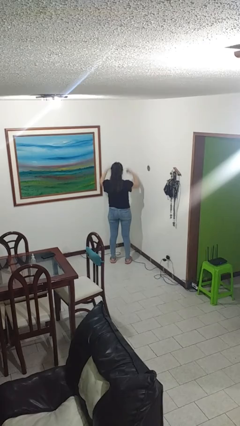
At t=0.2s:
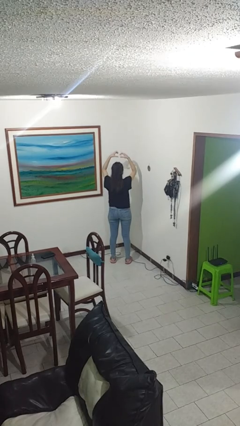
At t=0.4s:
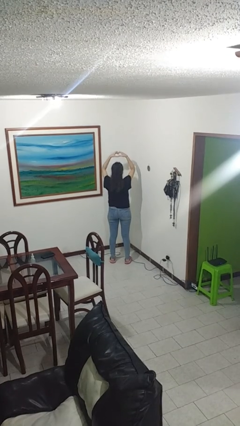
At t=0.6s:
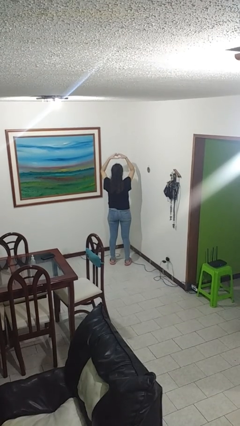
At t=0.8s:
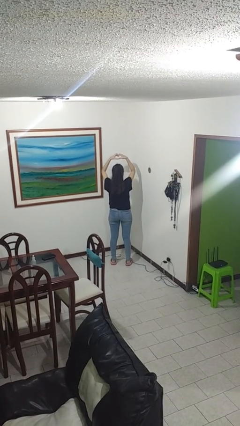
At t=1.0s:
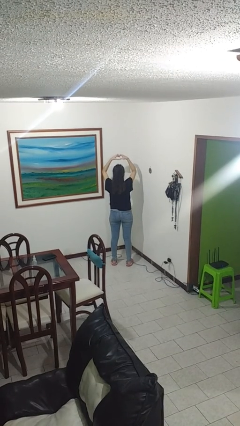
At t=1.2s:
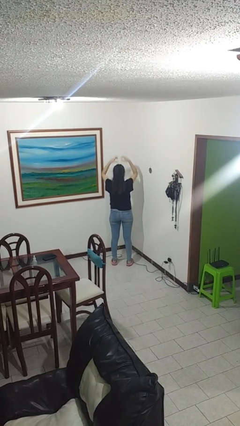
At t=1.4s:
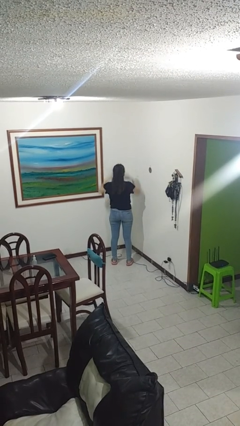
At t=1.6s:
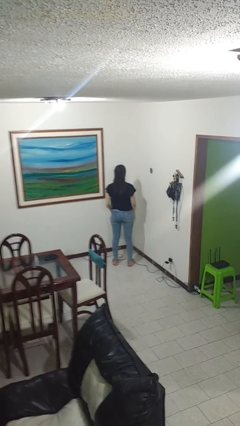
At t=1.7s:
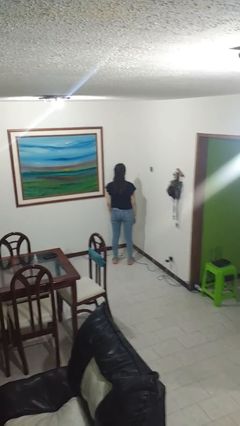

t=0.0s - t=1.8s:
person gestures heart

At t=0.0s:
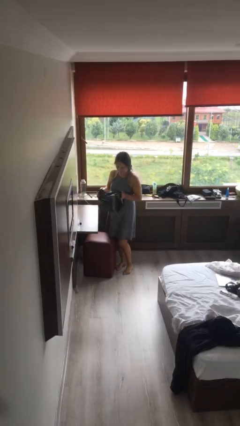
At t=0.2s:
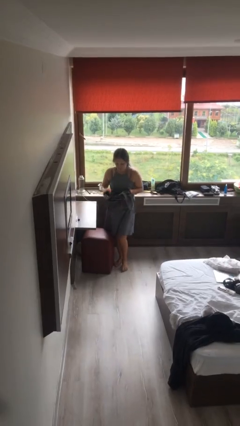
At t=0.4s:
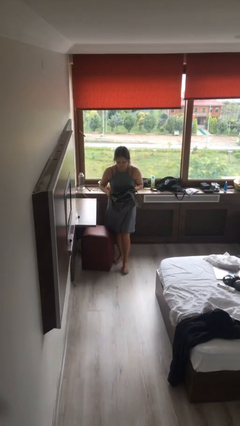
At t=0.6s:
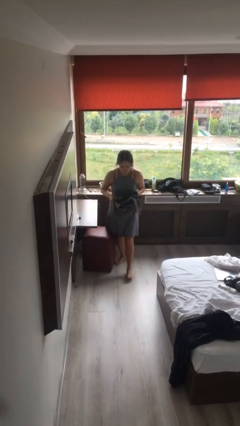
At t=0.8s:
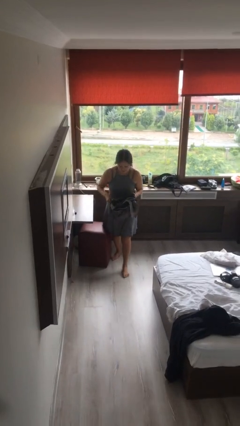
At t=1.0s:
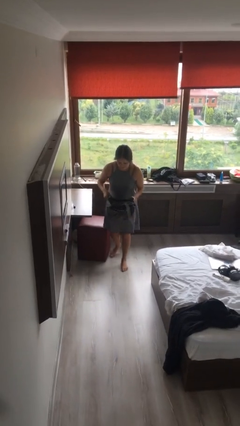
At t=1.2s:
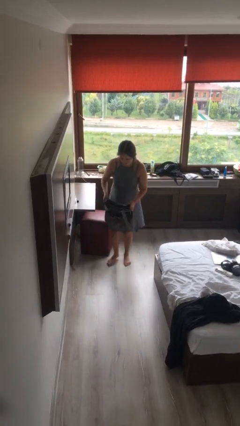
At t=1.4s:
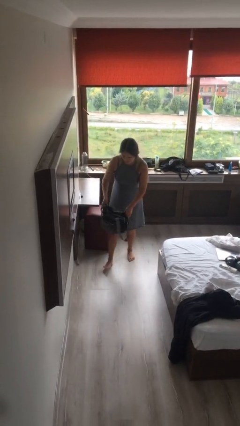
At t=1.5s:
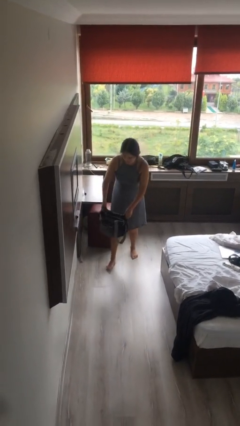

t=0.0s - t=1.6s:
person picks up object from table

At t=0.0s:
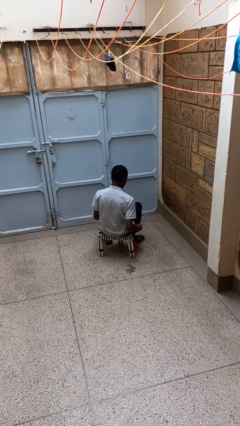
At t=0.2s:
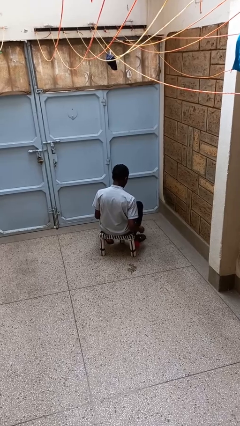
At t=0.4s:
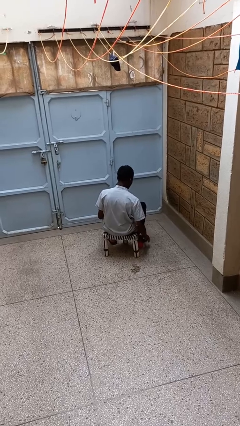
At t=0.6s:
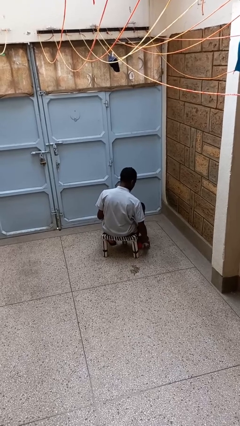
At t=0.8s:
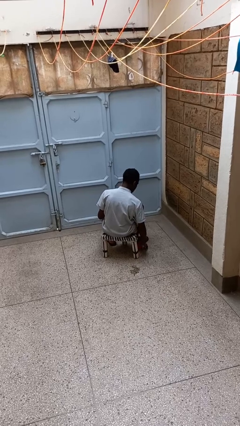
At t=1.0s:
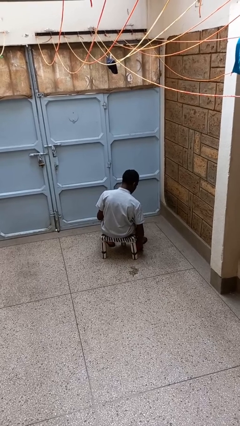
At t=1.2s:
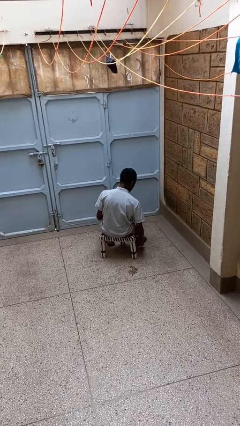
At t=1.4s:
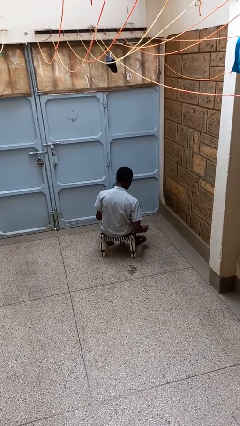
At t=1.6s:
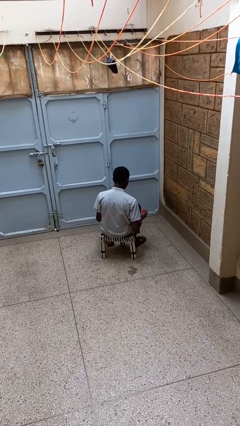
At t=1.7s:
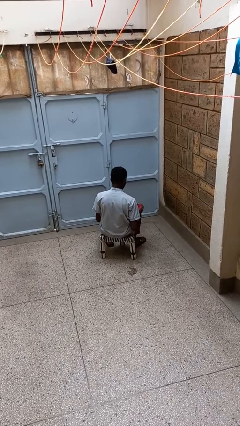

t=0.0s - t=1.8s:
person picks up object from floor

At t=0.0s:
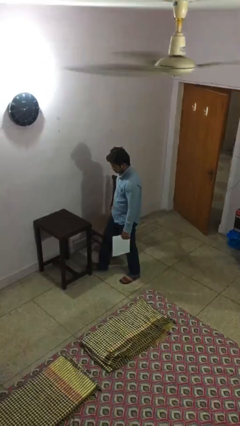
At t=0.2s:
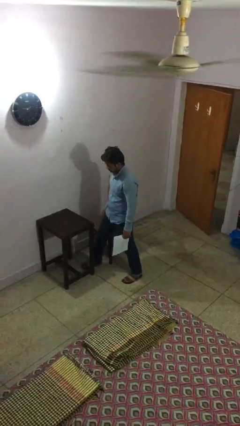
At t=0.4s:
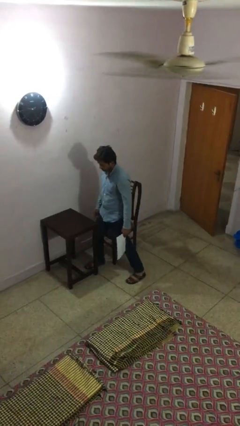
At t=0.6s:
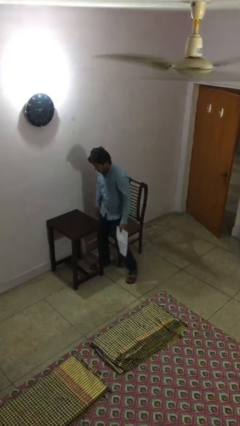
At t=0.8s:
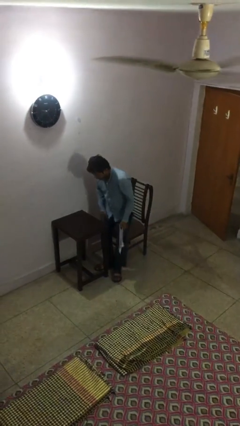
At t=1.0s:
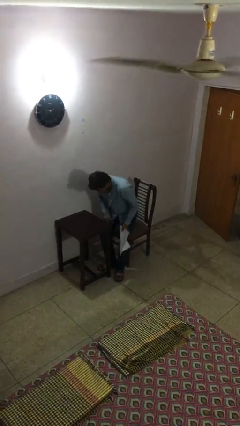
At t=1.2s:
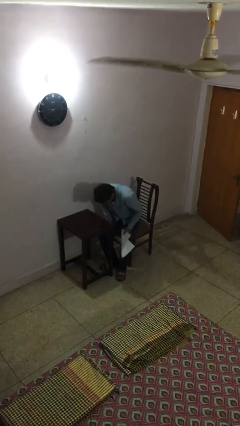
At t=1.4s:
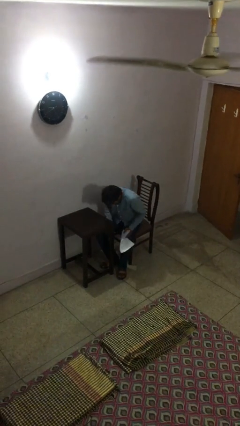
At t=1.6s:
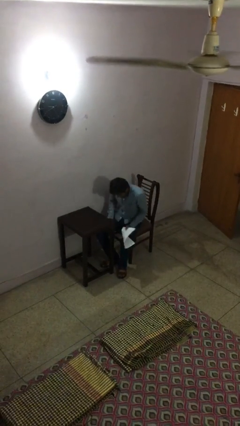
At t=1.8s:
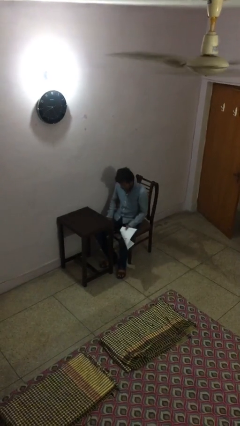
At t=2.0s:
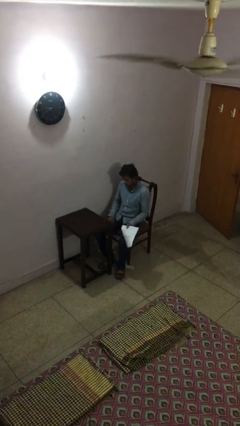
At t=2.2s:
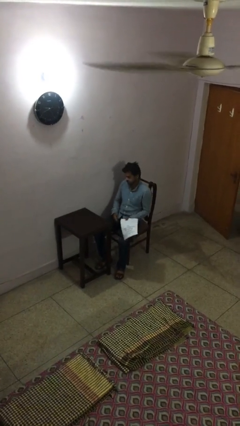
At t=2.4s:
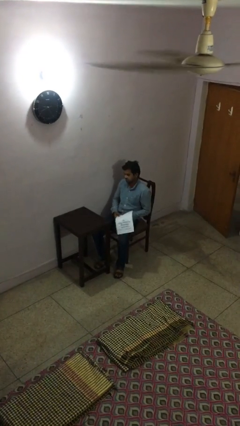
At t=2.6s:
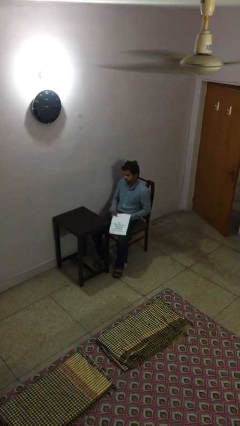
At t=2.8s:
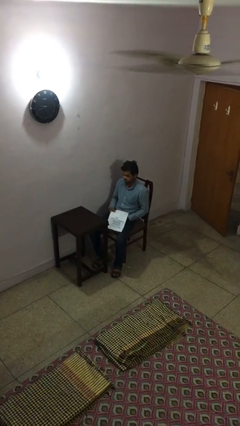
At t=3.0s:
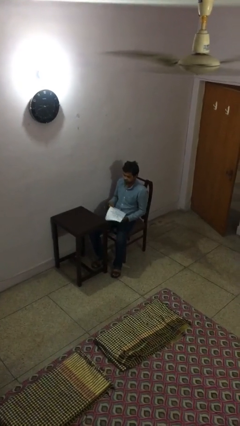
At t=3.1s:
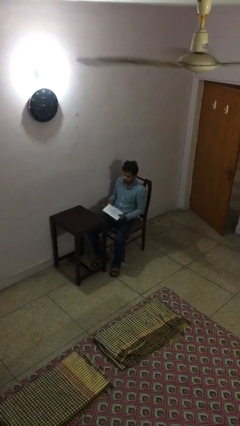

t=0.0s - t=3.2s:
person sits down

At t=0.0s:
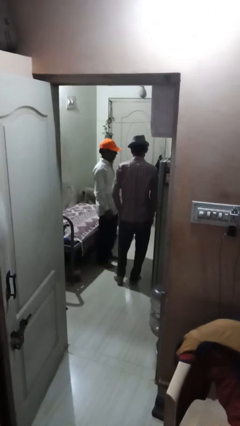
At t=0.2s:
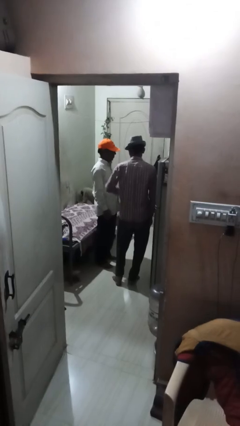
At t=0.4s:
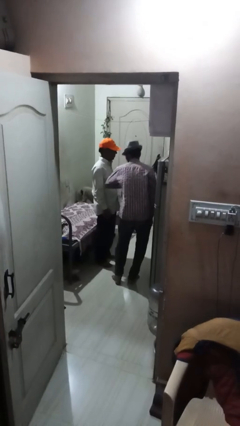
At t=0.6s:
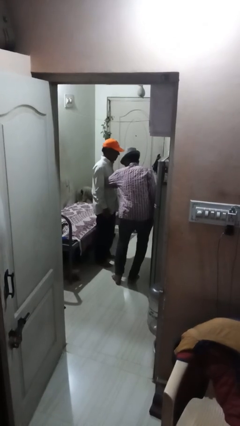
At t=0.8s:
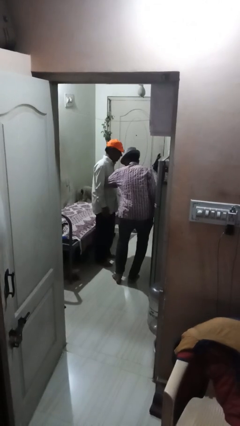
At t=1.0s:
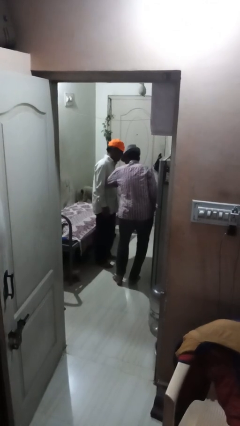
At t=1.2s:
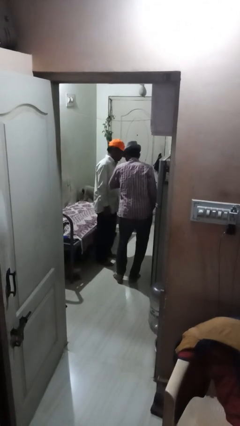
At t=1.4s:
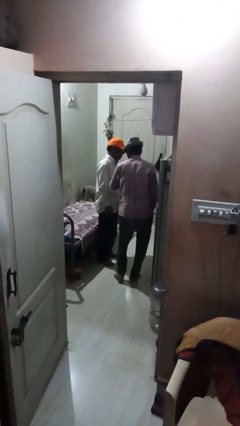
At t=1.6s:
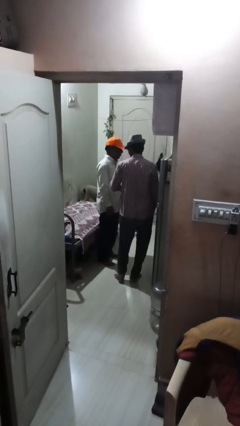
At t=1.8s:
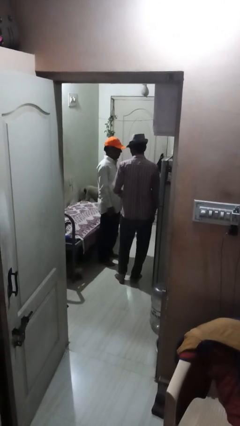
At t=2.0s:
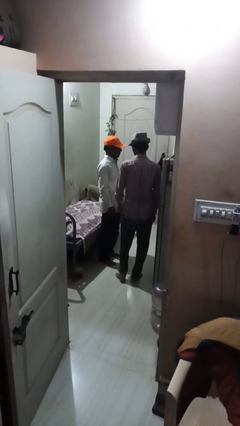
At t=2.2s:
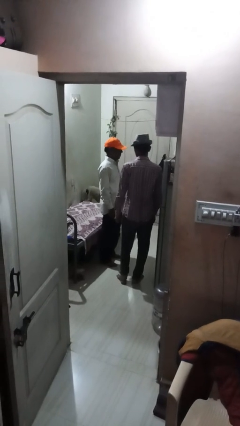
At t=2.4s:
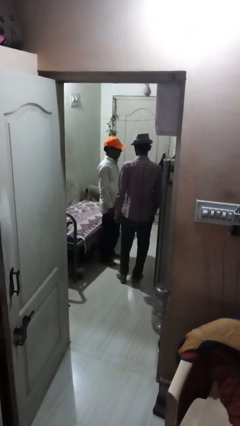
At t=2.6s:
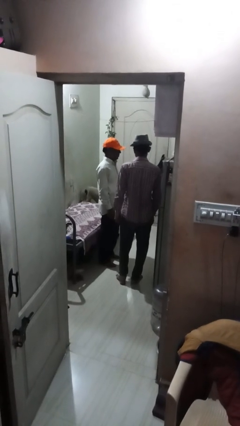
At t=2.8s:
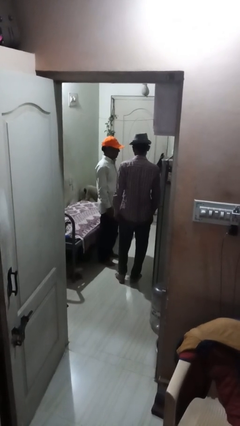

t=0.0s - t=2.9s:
person nudges person with elbow

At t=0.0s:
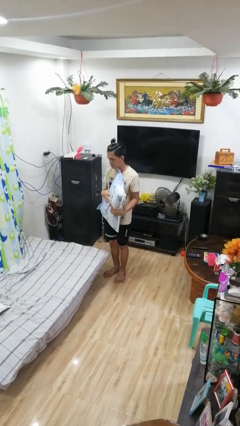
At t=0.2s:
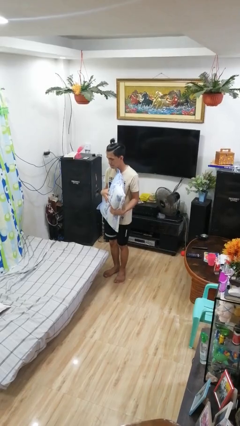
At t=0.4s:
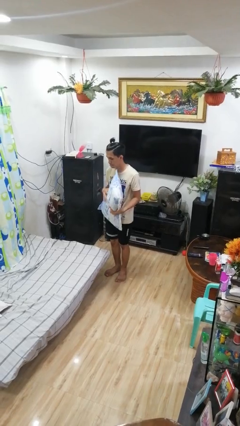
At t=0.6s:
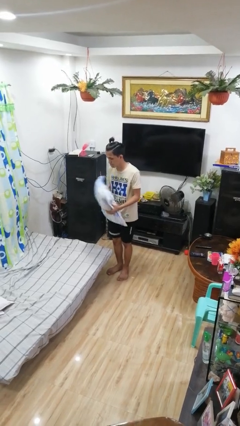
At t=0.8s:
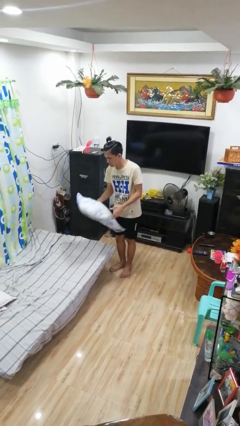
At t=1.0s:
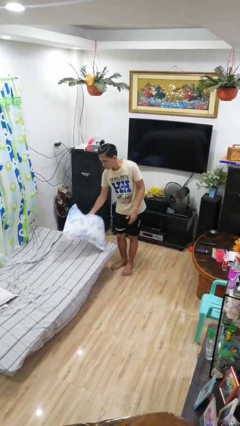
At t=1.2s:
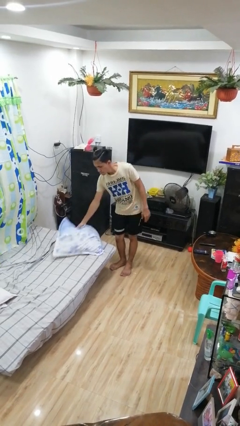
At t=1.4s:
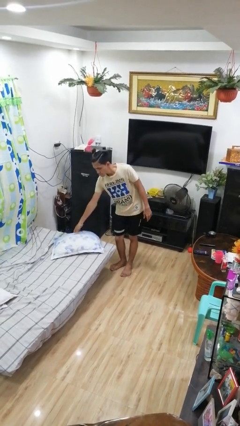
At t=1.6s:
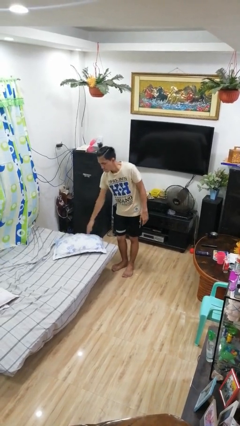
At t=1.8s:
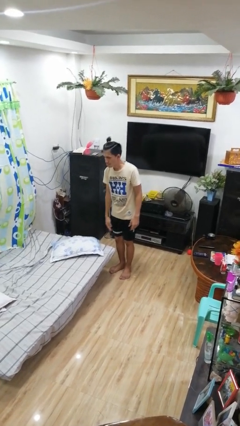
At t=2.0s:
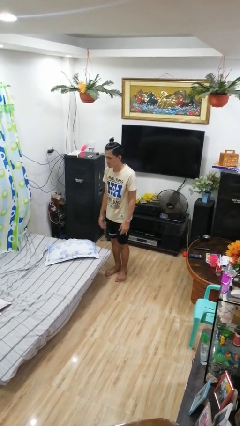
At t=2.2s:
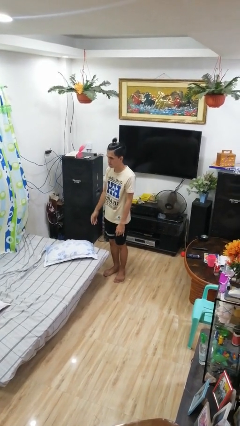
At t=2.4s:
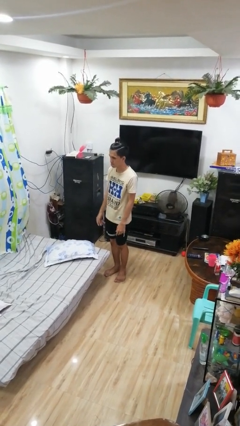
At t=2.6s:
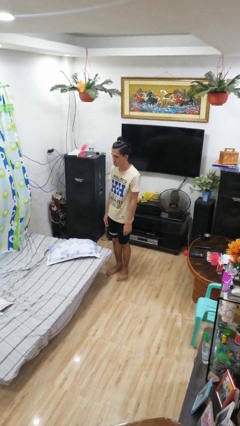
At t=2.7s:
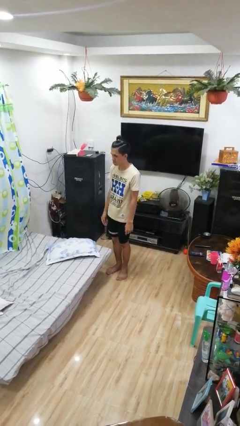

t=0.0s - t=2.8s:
person puts down object on bed

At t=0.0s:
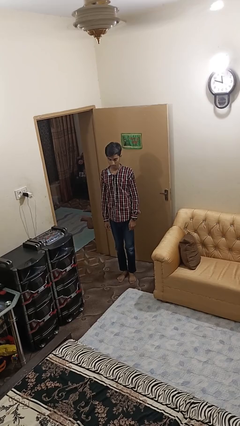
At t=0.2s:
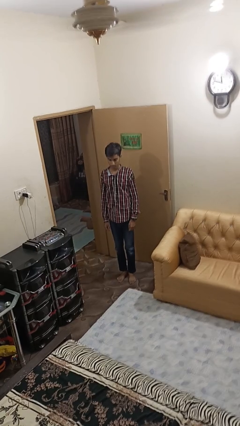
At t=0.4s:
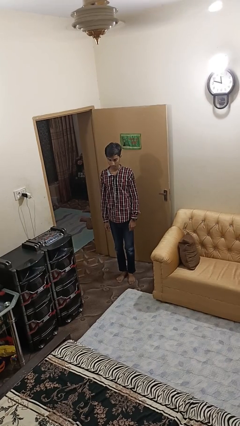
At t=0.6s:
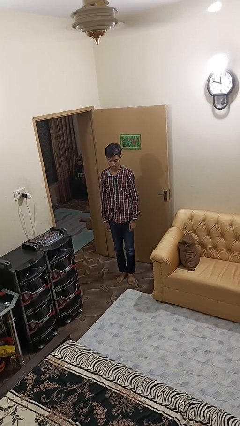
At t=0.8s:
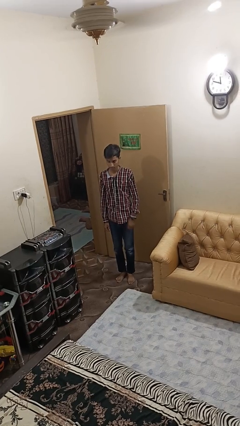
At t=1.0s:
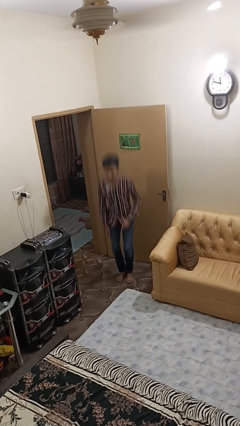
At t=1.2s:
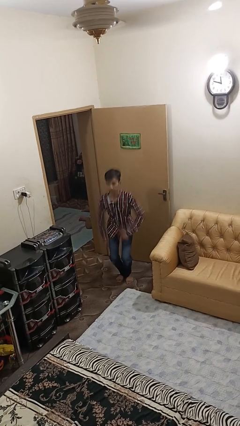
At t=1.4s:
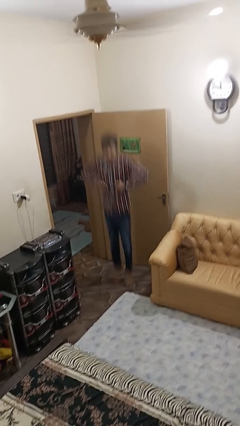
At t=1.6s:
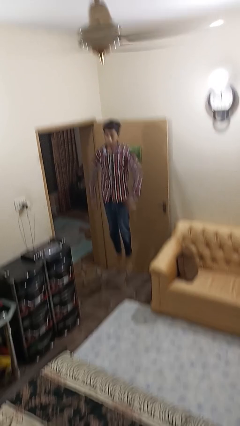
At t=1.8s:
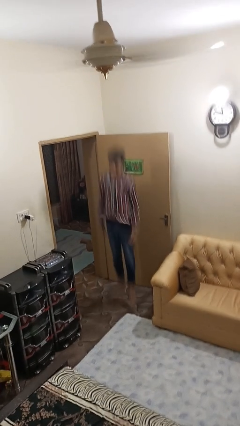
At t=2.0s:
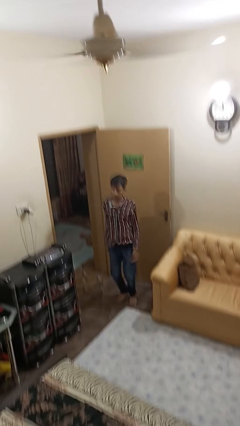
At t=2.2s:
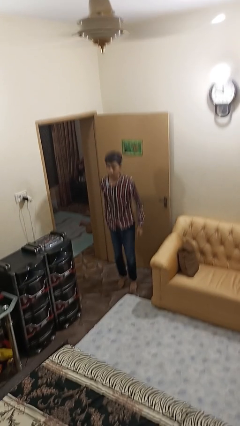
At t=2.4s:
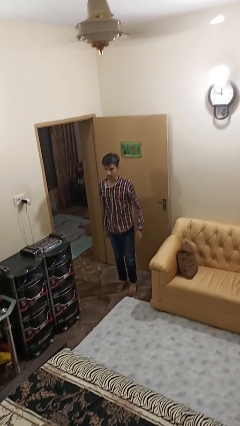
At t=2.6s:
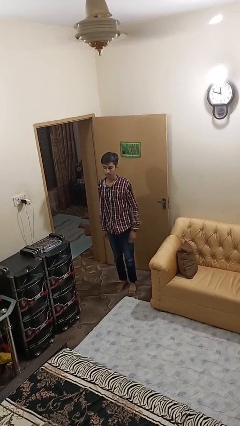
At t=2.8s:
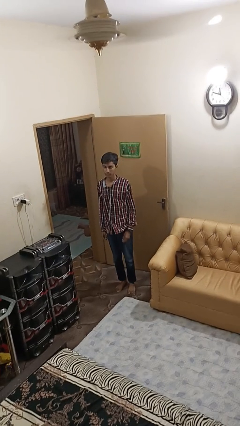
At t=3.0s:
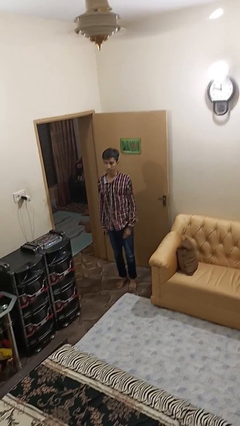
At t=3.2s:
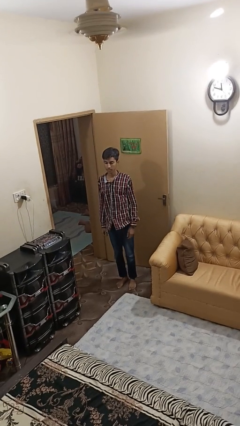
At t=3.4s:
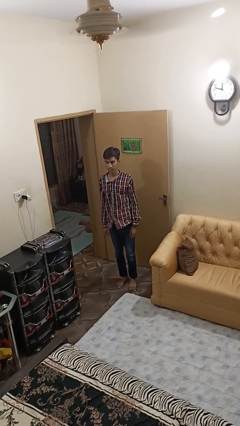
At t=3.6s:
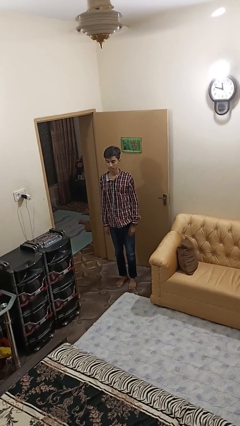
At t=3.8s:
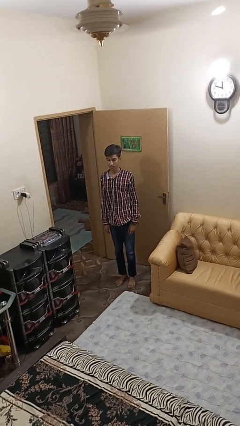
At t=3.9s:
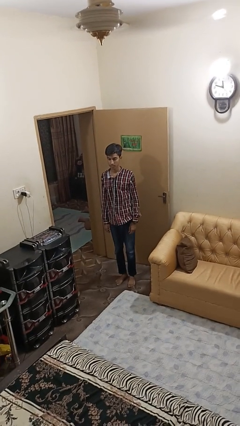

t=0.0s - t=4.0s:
person jumps
